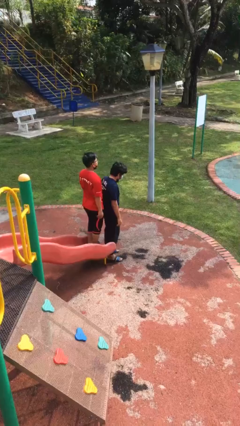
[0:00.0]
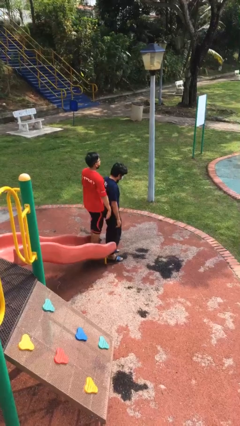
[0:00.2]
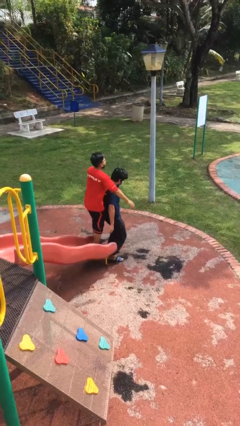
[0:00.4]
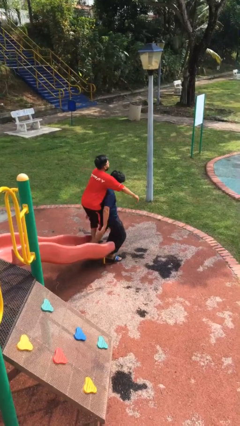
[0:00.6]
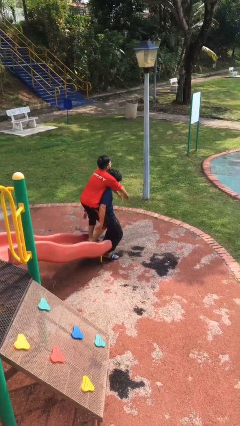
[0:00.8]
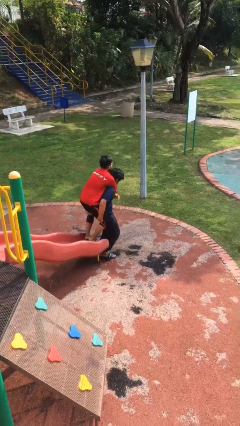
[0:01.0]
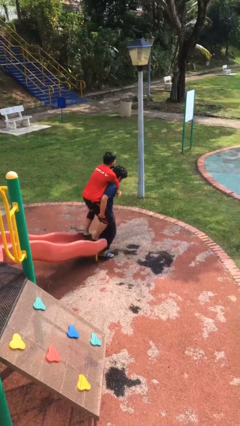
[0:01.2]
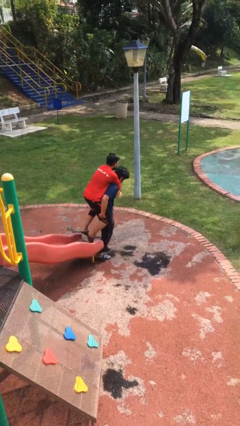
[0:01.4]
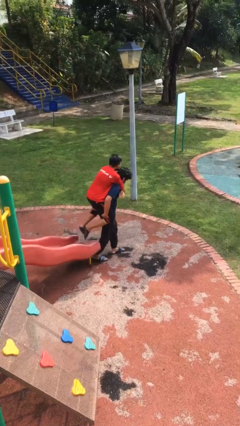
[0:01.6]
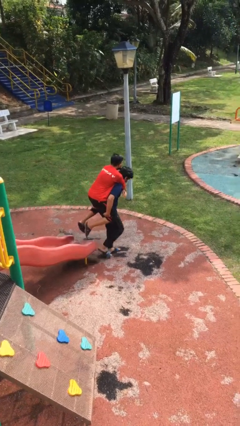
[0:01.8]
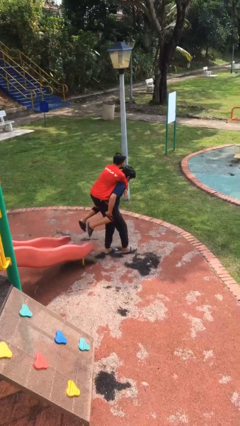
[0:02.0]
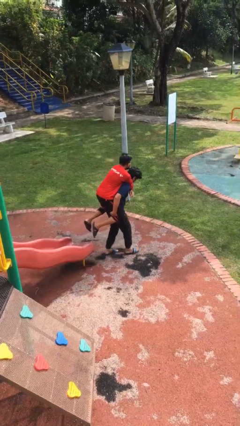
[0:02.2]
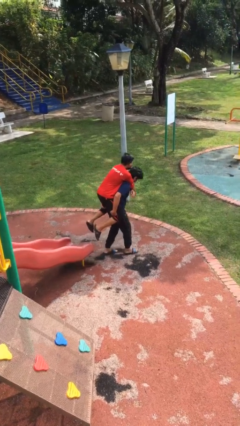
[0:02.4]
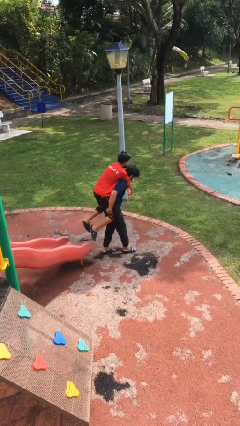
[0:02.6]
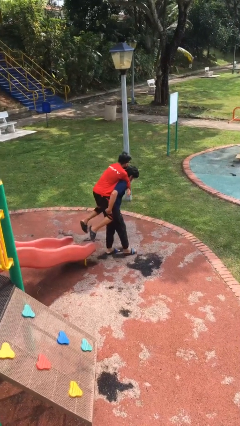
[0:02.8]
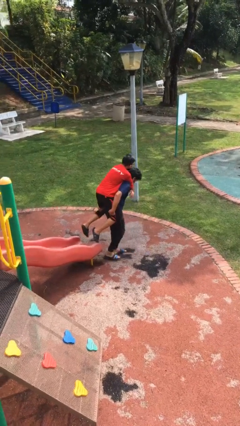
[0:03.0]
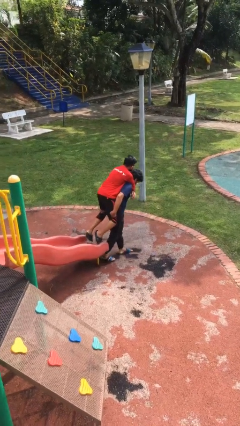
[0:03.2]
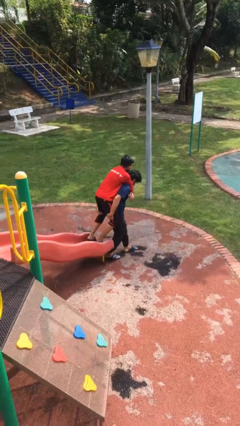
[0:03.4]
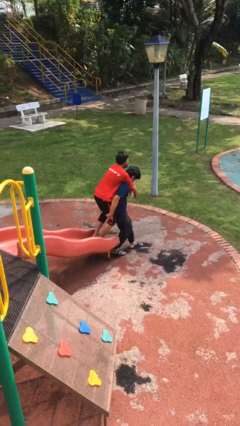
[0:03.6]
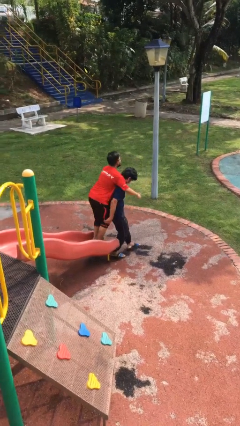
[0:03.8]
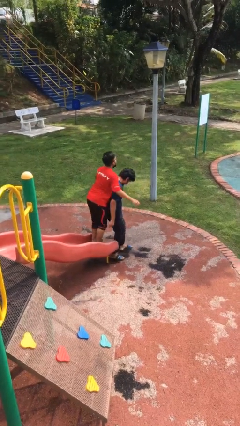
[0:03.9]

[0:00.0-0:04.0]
person carries person on back

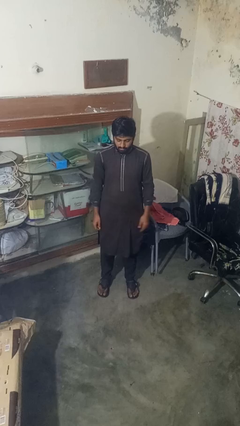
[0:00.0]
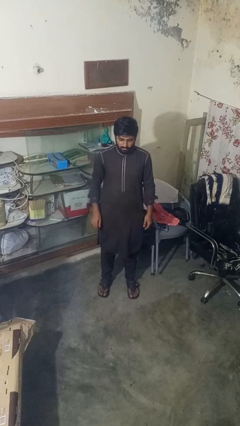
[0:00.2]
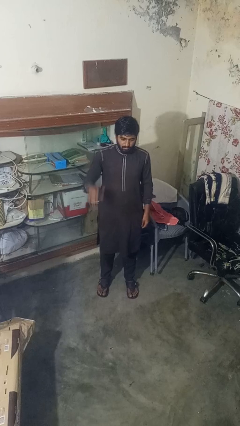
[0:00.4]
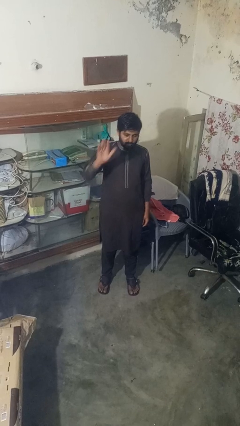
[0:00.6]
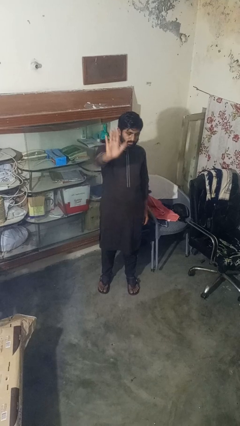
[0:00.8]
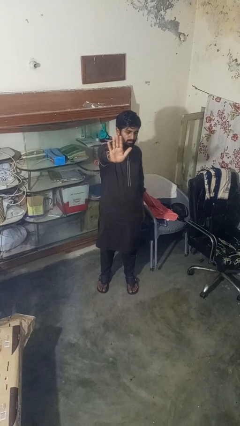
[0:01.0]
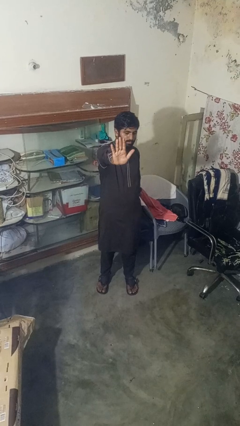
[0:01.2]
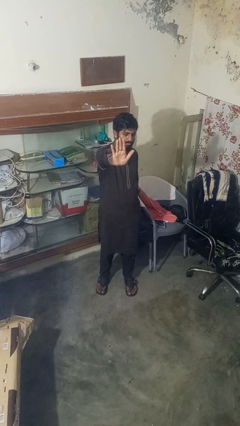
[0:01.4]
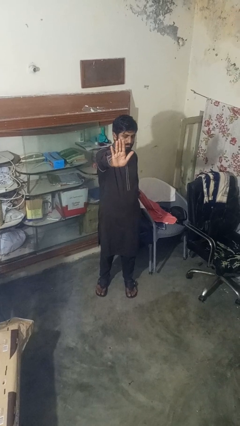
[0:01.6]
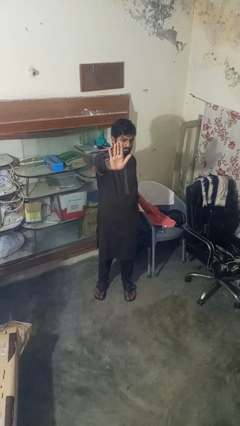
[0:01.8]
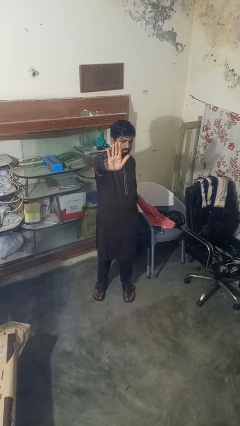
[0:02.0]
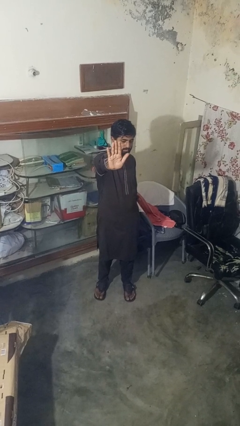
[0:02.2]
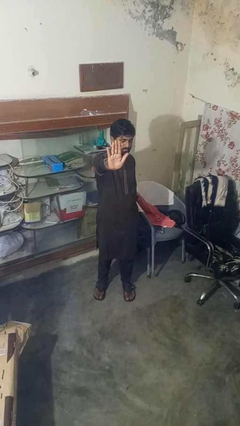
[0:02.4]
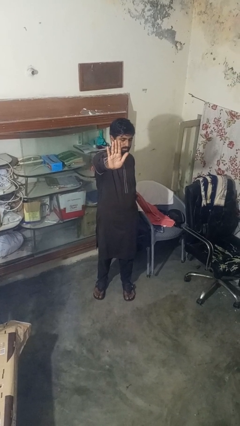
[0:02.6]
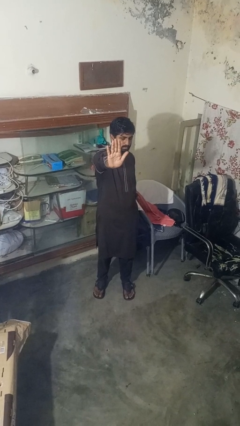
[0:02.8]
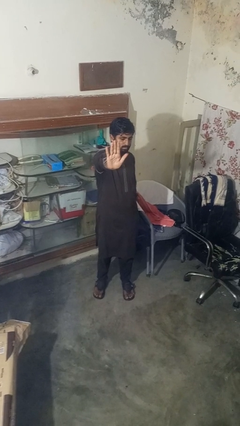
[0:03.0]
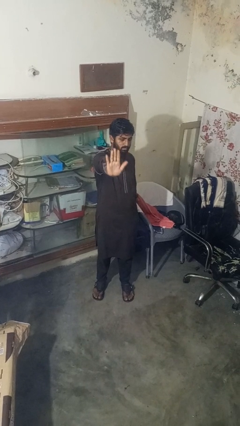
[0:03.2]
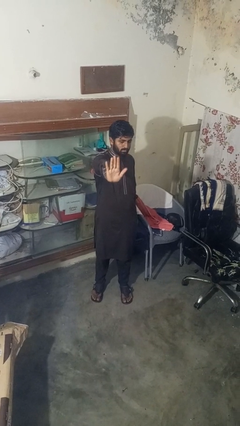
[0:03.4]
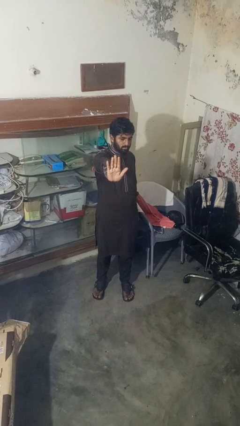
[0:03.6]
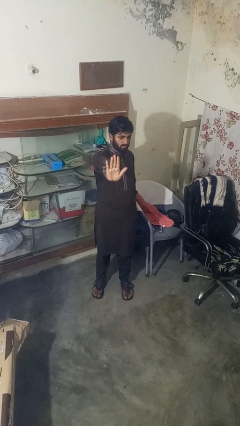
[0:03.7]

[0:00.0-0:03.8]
person gestures stop

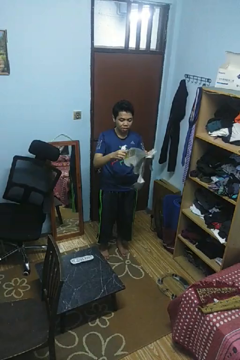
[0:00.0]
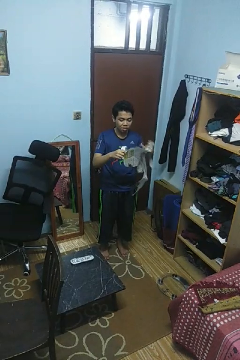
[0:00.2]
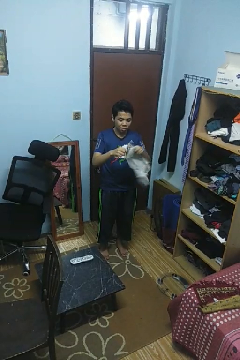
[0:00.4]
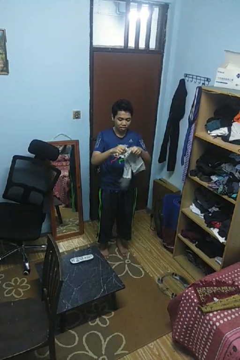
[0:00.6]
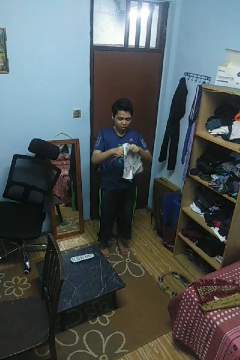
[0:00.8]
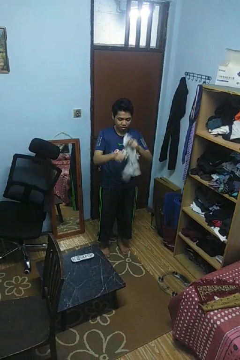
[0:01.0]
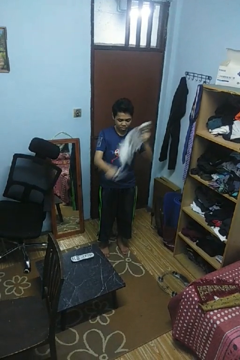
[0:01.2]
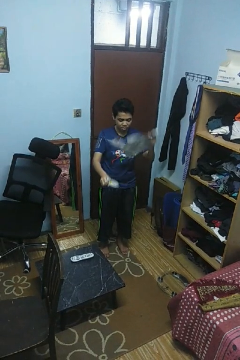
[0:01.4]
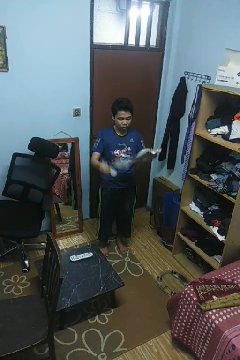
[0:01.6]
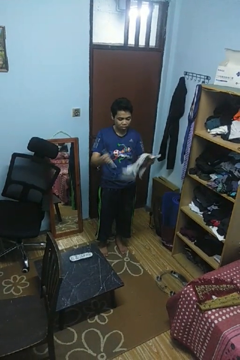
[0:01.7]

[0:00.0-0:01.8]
person tears paper

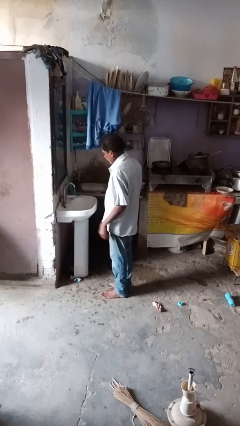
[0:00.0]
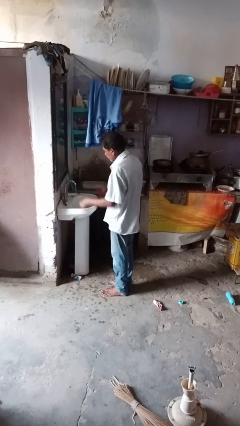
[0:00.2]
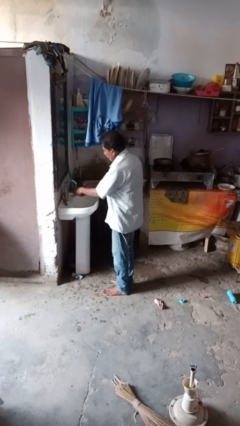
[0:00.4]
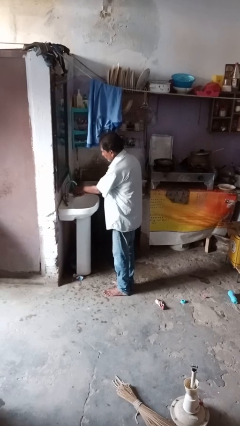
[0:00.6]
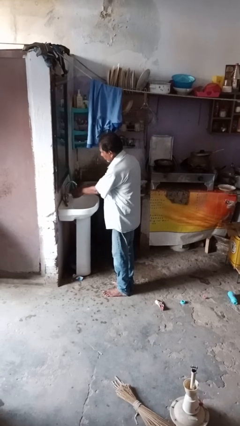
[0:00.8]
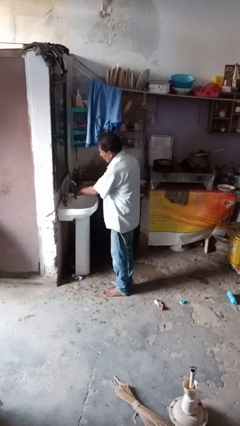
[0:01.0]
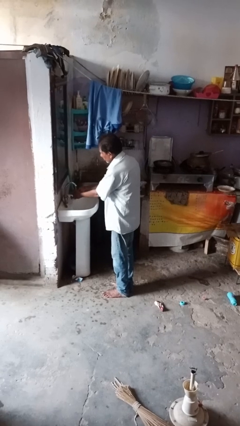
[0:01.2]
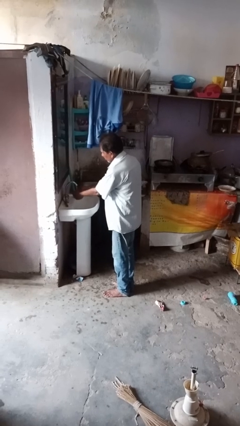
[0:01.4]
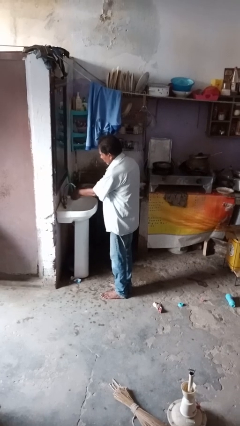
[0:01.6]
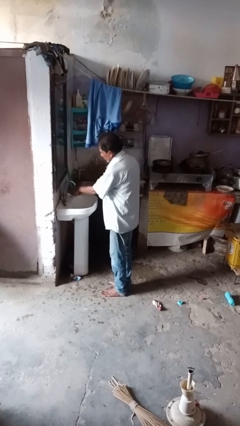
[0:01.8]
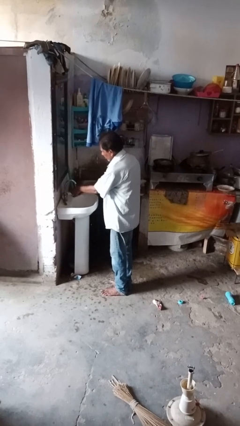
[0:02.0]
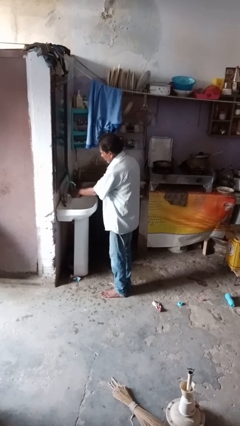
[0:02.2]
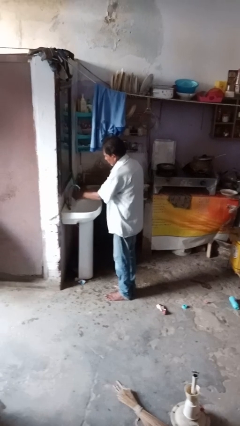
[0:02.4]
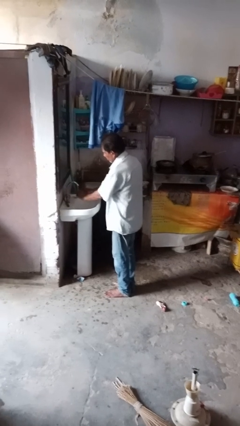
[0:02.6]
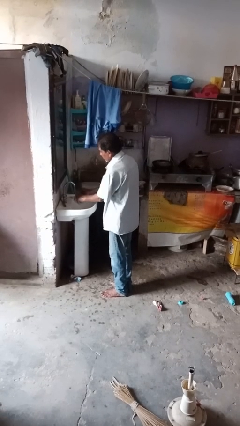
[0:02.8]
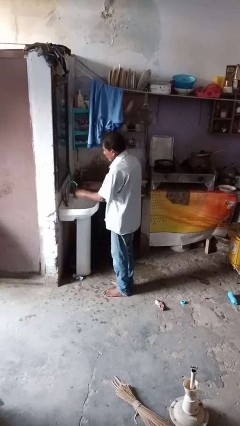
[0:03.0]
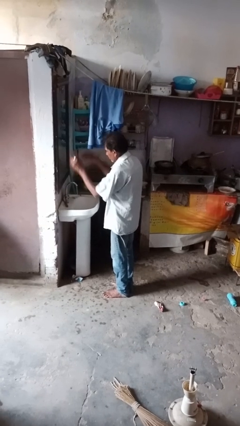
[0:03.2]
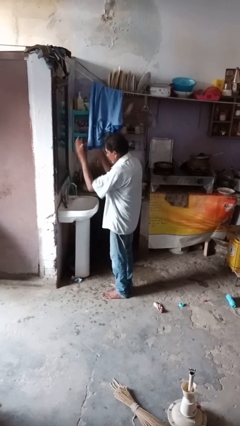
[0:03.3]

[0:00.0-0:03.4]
person washes hands

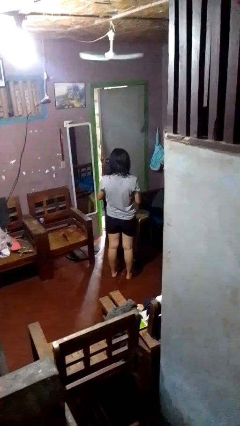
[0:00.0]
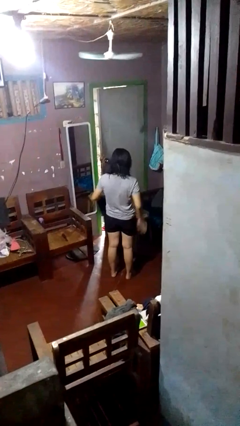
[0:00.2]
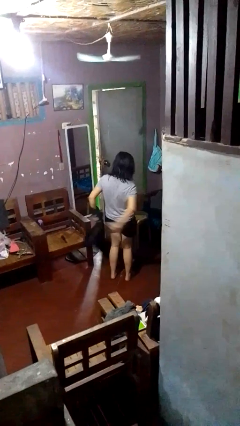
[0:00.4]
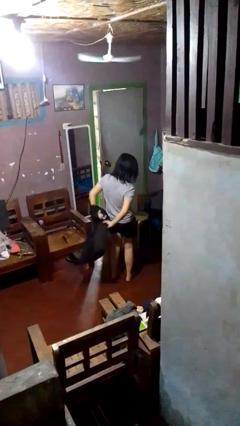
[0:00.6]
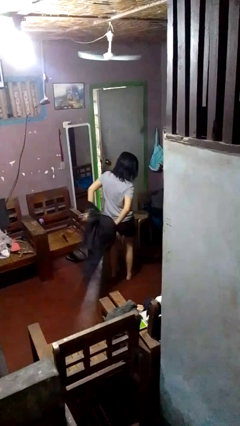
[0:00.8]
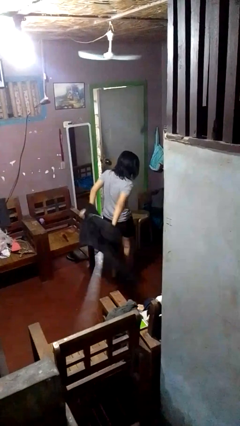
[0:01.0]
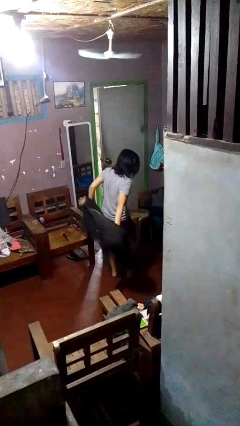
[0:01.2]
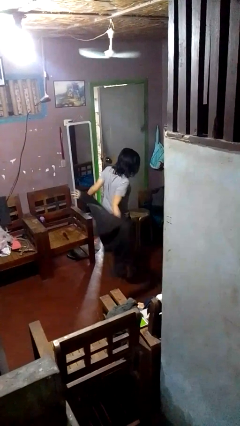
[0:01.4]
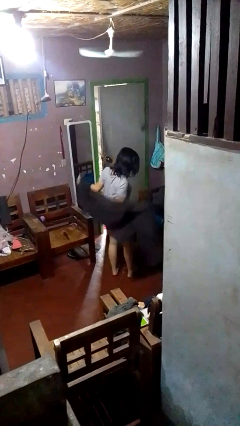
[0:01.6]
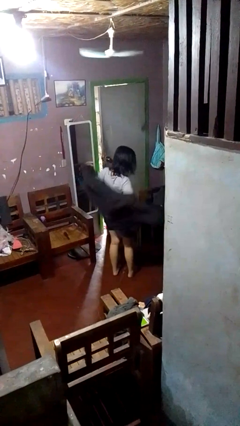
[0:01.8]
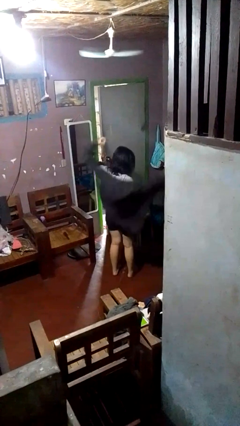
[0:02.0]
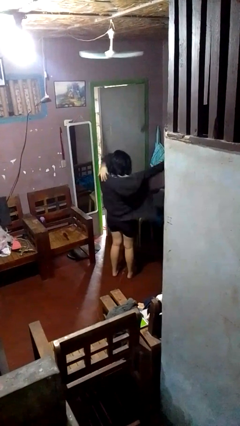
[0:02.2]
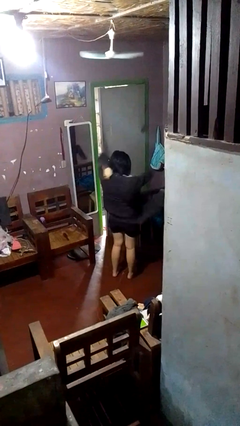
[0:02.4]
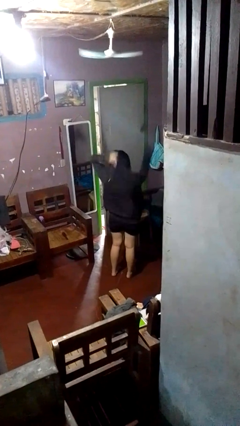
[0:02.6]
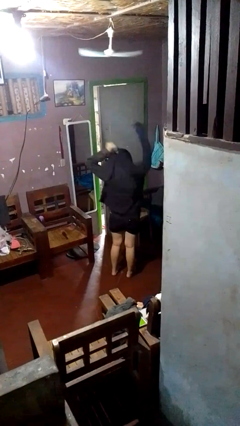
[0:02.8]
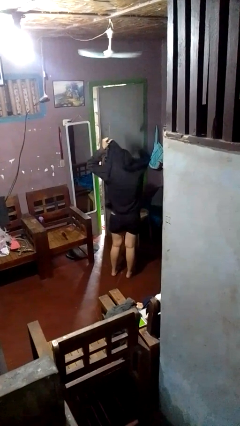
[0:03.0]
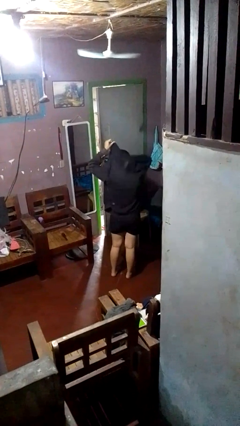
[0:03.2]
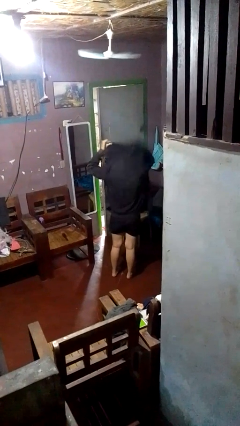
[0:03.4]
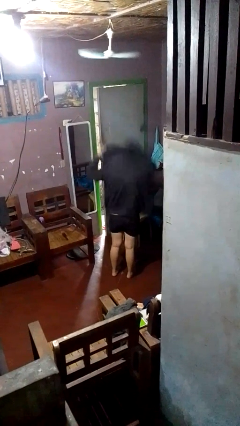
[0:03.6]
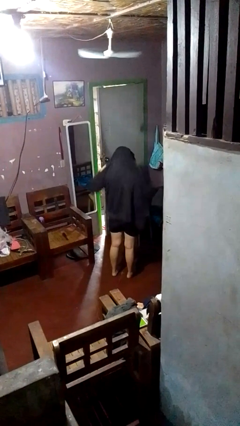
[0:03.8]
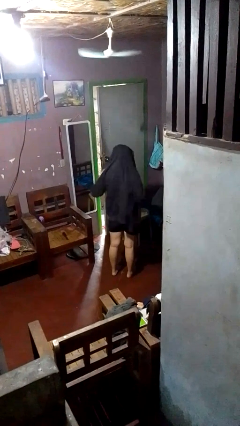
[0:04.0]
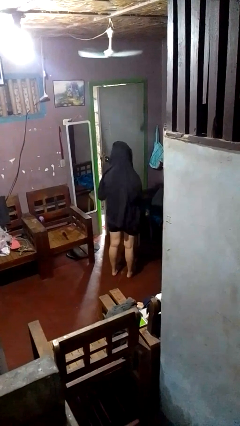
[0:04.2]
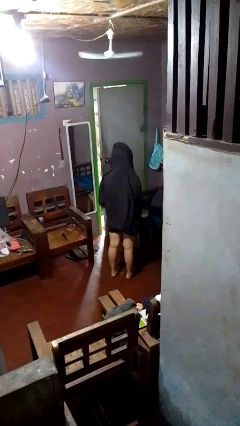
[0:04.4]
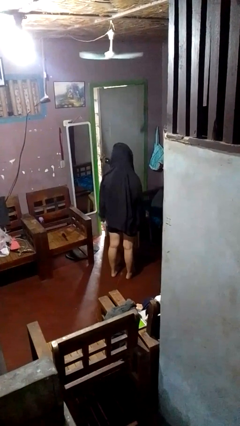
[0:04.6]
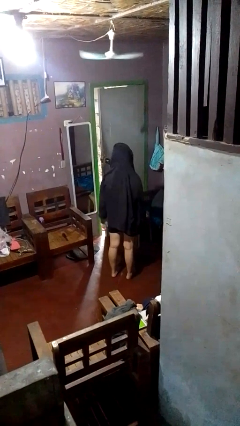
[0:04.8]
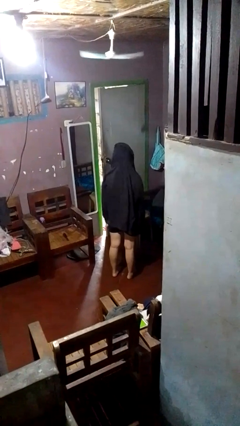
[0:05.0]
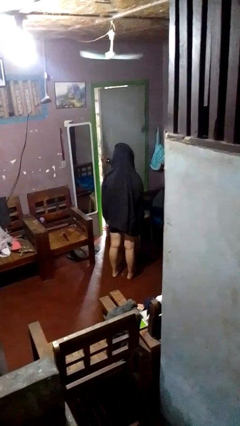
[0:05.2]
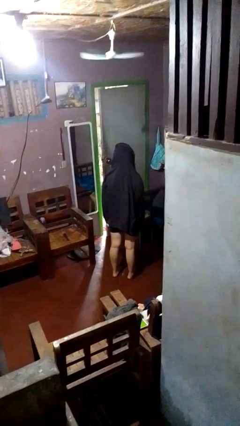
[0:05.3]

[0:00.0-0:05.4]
person puts on hoodie
